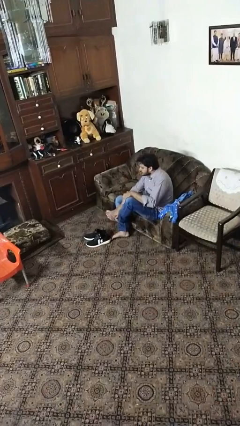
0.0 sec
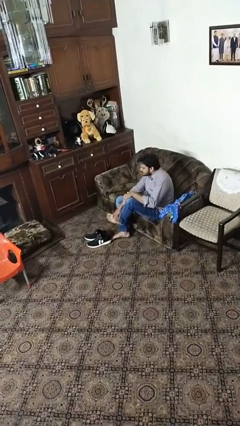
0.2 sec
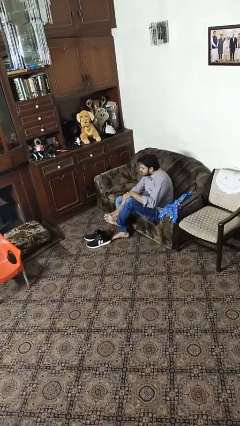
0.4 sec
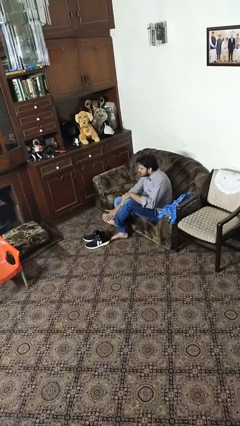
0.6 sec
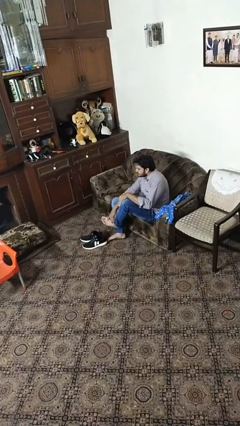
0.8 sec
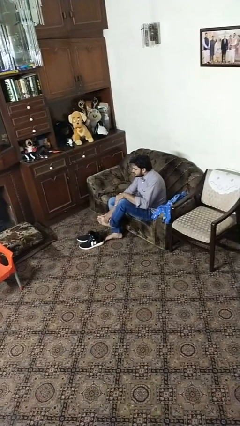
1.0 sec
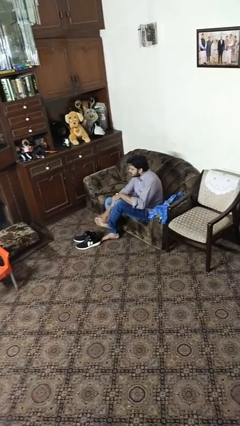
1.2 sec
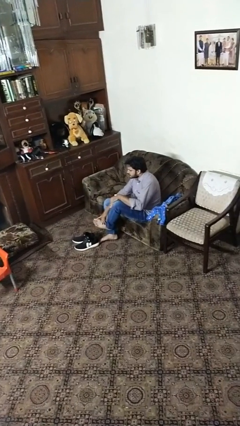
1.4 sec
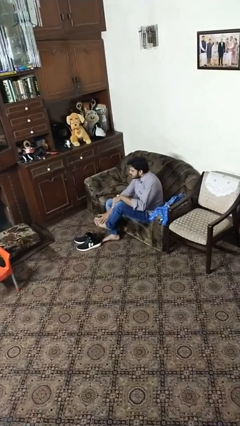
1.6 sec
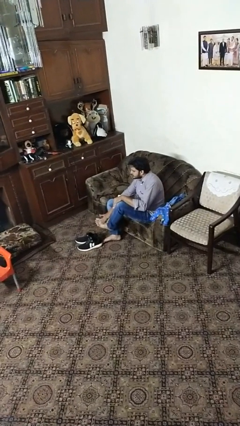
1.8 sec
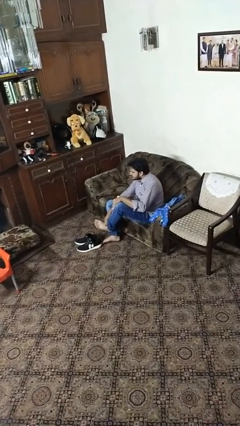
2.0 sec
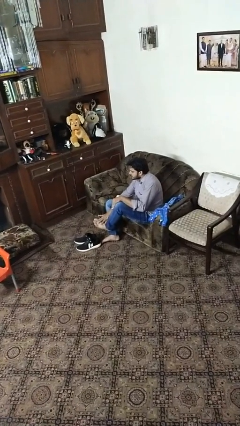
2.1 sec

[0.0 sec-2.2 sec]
person rubs foot

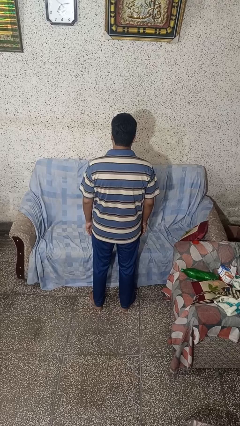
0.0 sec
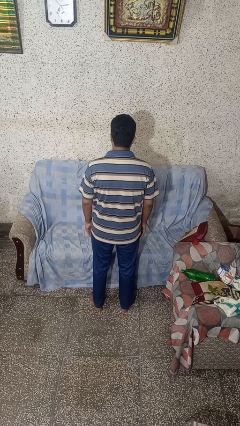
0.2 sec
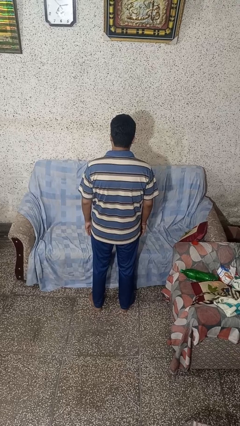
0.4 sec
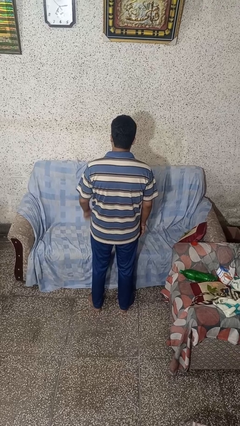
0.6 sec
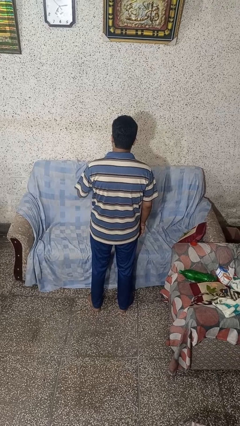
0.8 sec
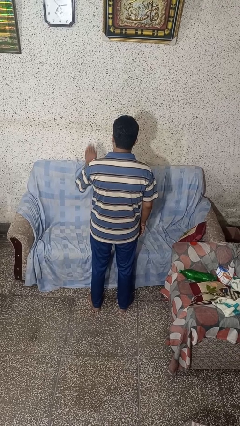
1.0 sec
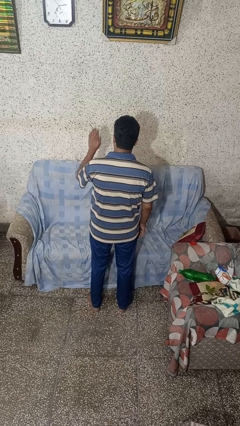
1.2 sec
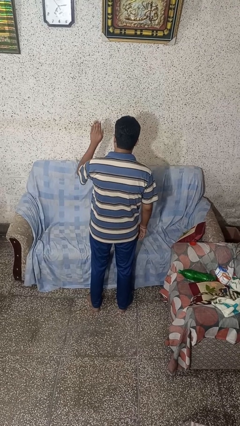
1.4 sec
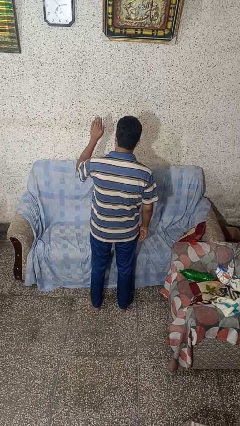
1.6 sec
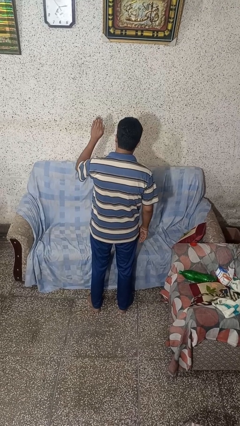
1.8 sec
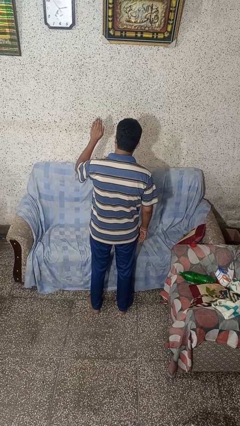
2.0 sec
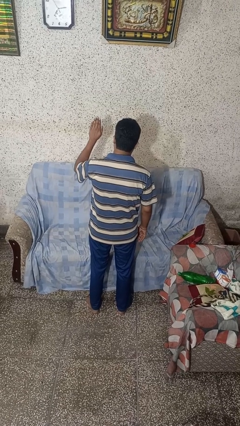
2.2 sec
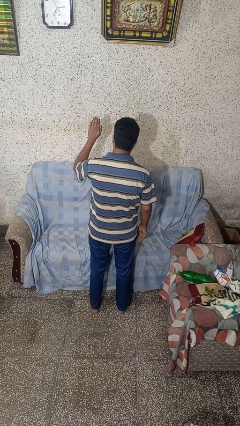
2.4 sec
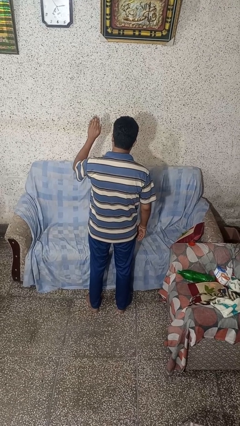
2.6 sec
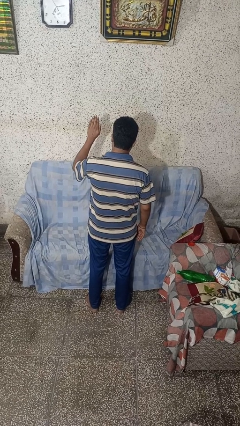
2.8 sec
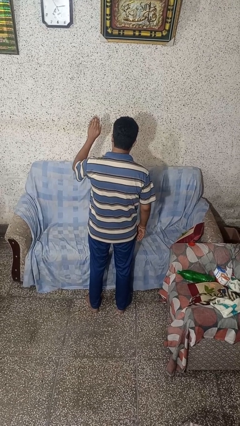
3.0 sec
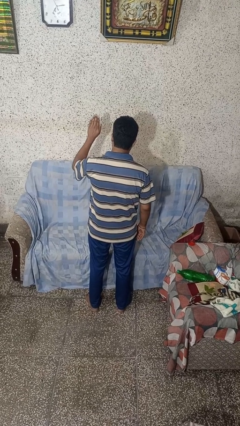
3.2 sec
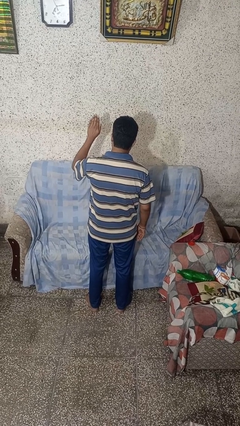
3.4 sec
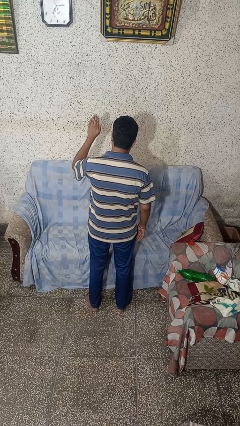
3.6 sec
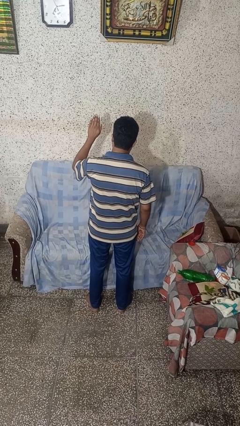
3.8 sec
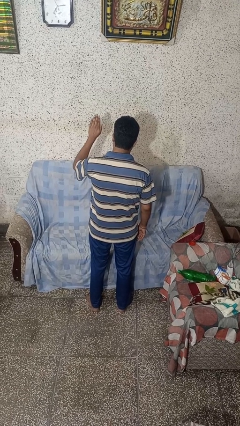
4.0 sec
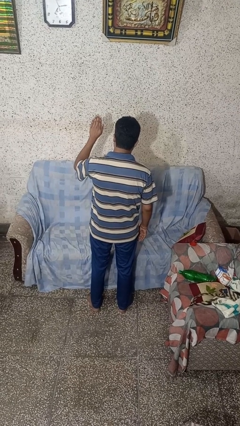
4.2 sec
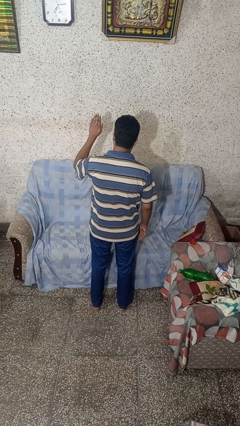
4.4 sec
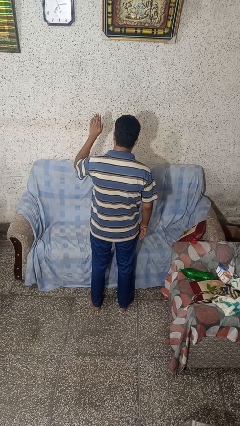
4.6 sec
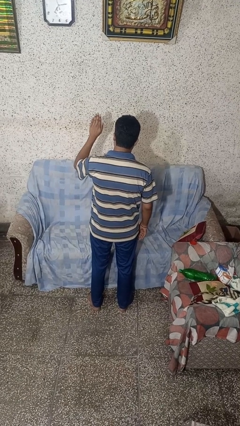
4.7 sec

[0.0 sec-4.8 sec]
person gestures stop

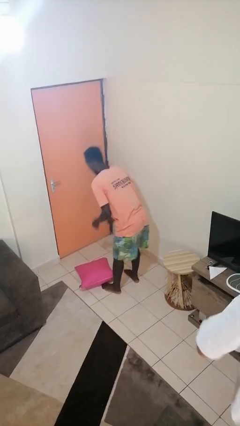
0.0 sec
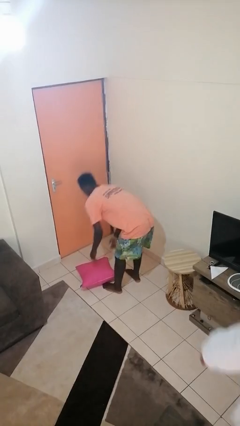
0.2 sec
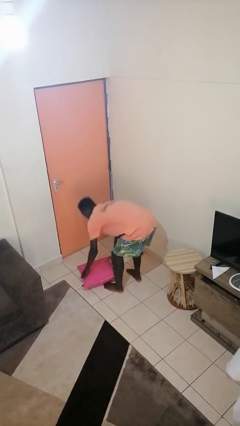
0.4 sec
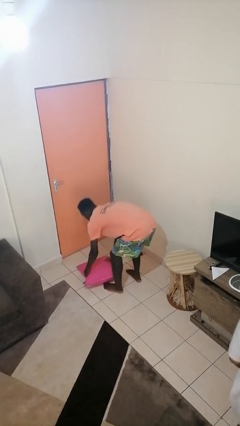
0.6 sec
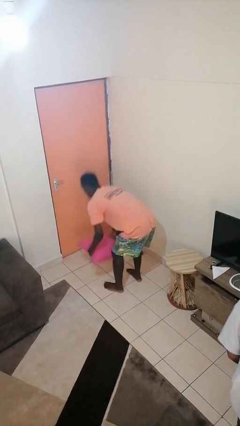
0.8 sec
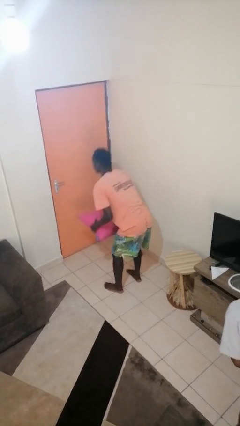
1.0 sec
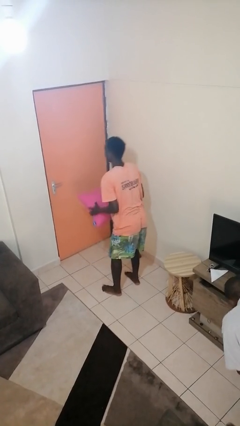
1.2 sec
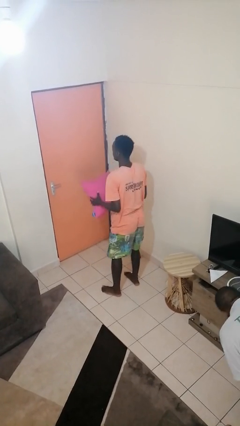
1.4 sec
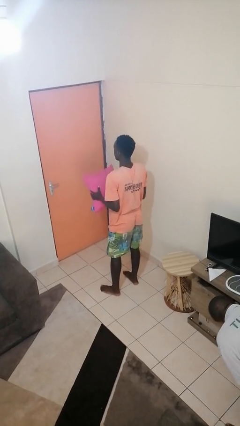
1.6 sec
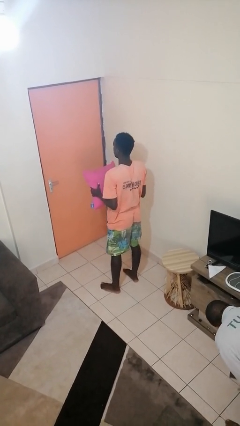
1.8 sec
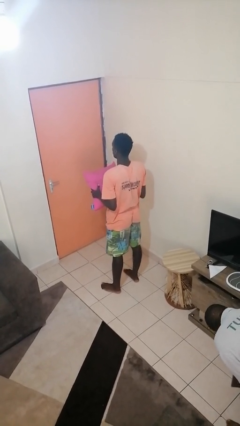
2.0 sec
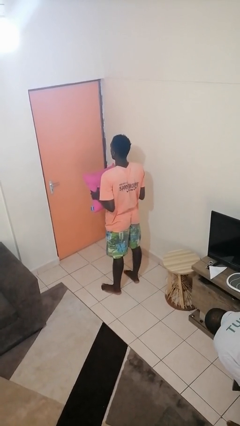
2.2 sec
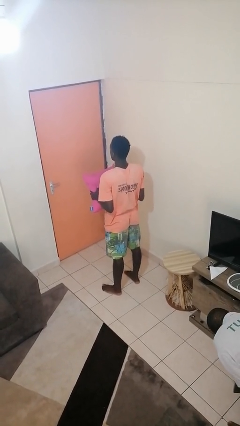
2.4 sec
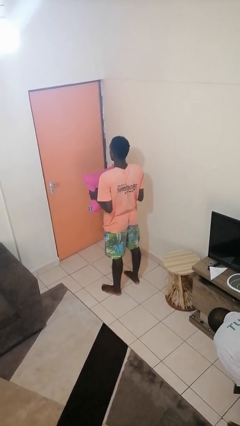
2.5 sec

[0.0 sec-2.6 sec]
person picks up object from floor

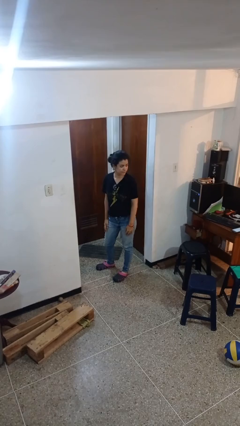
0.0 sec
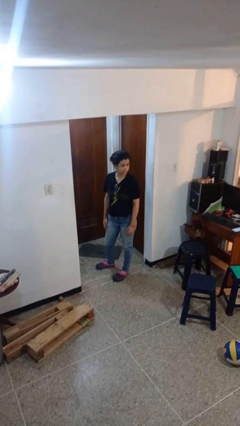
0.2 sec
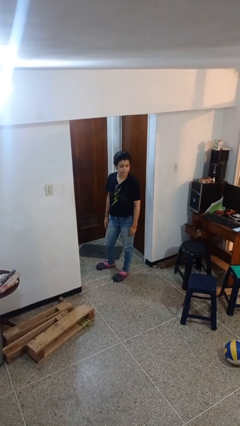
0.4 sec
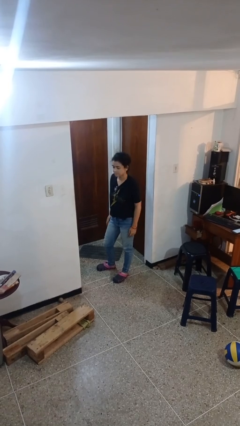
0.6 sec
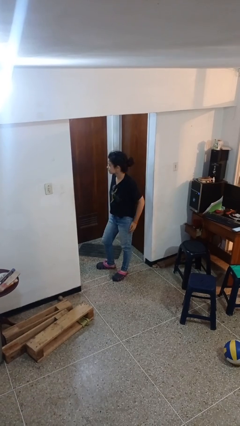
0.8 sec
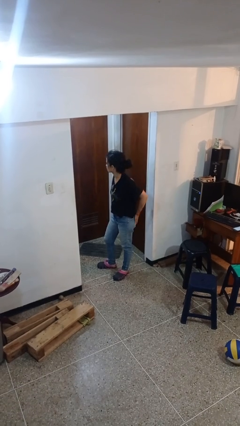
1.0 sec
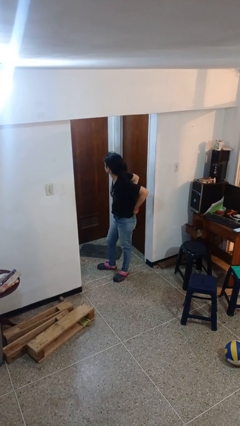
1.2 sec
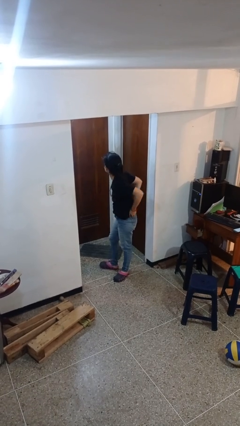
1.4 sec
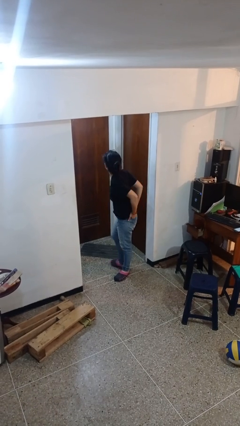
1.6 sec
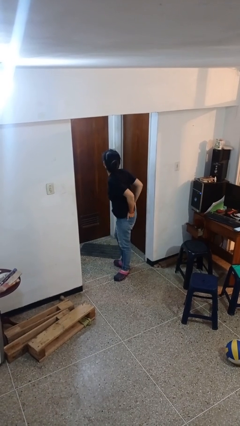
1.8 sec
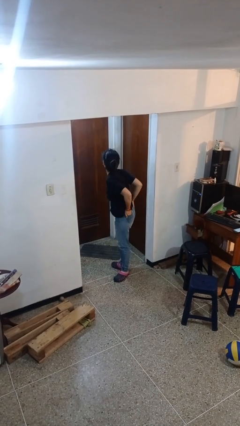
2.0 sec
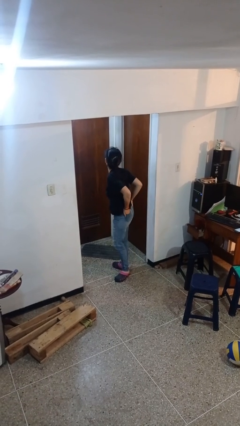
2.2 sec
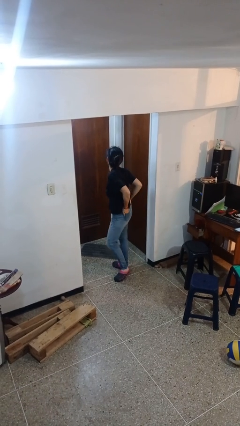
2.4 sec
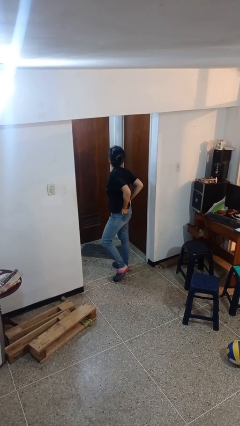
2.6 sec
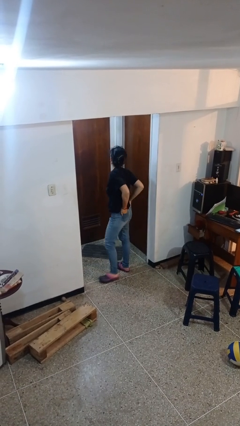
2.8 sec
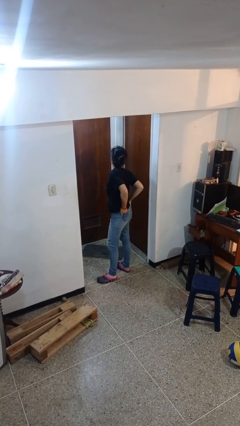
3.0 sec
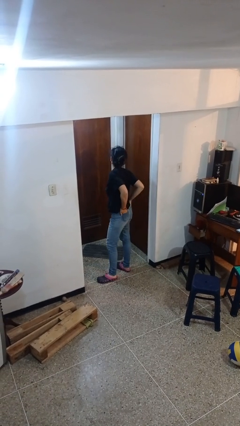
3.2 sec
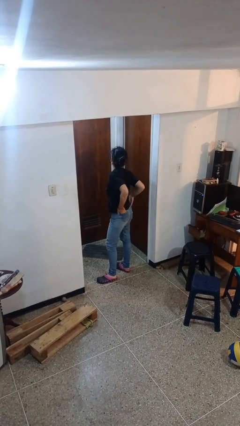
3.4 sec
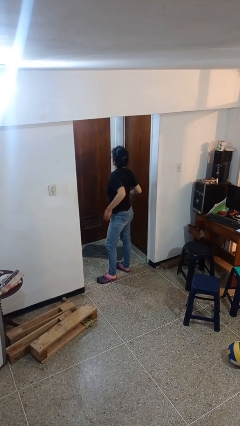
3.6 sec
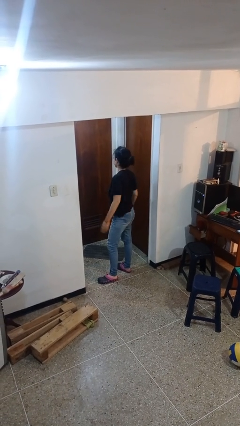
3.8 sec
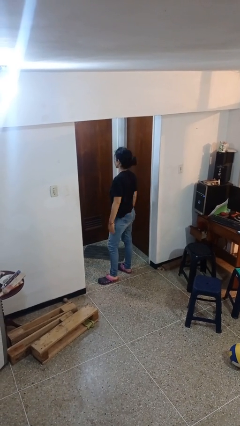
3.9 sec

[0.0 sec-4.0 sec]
person puts hands in back pockets

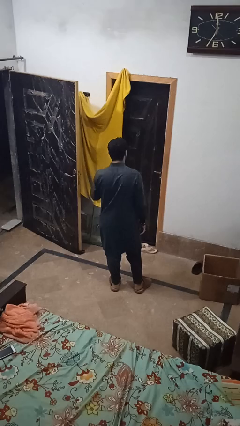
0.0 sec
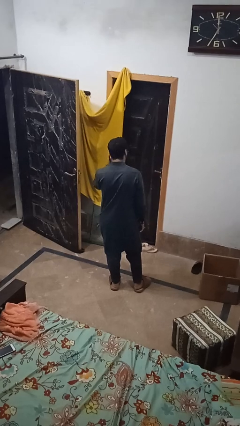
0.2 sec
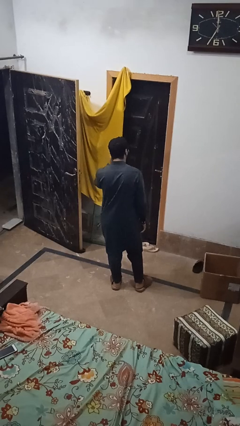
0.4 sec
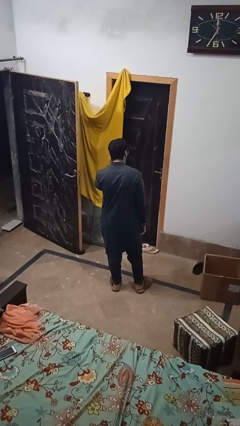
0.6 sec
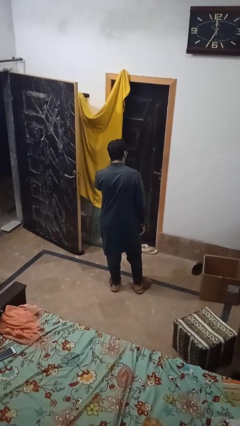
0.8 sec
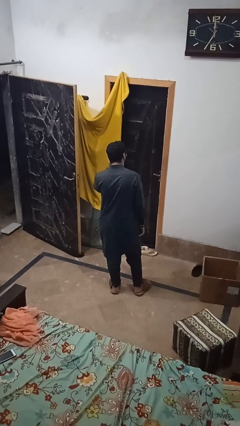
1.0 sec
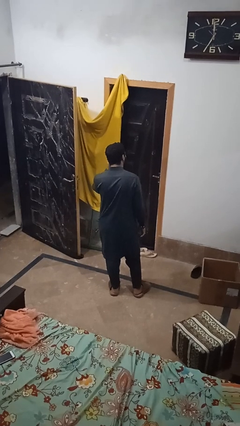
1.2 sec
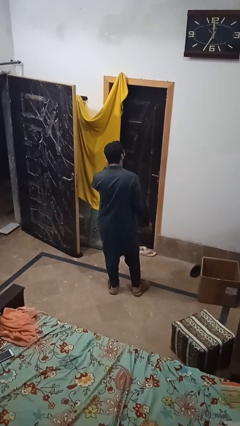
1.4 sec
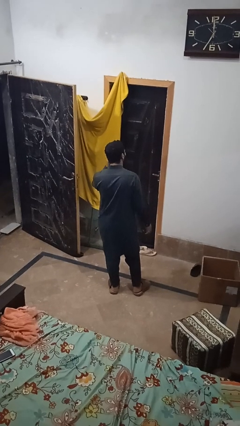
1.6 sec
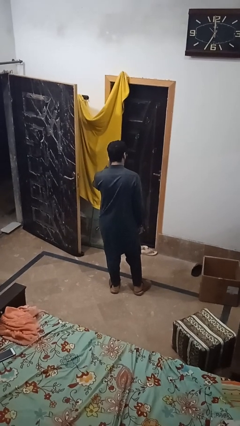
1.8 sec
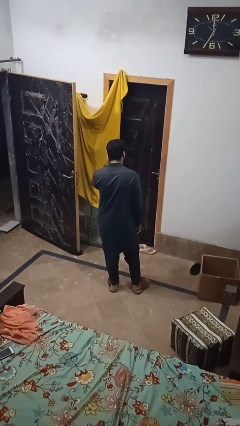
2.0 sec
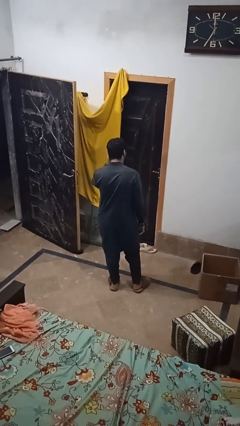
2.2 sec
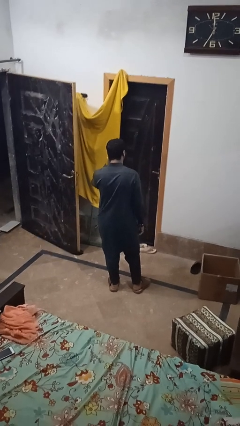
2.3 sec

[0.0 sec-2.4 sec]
person gestures listen closely

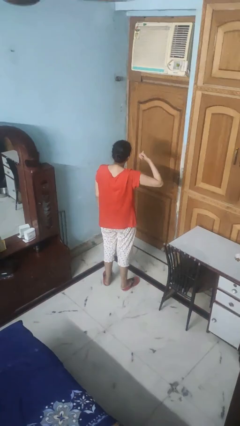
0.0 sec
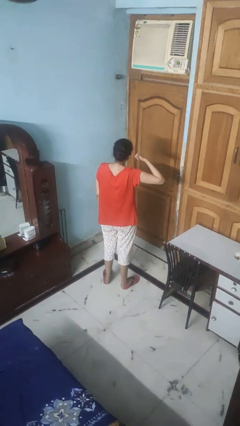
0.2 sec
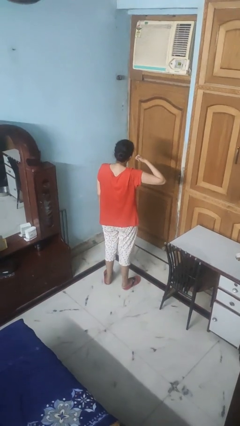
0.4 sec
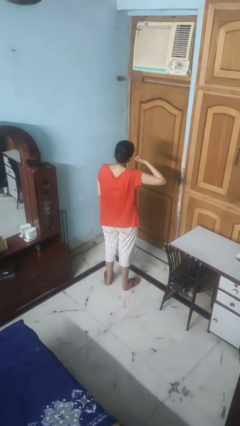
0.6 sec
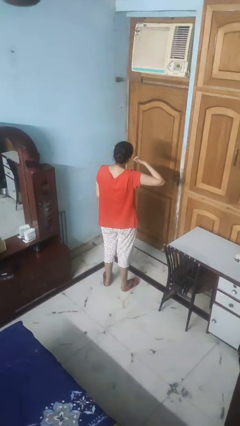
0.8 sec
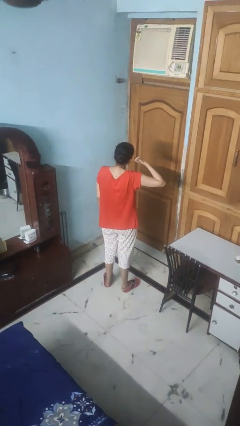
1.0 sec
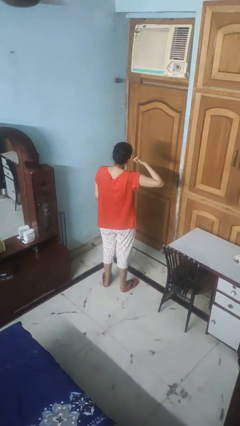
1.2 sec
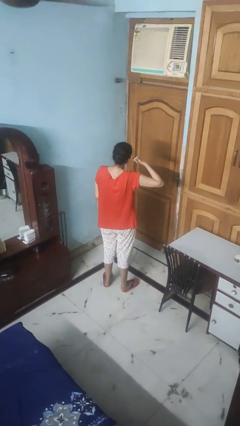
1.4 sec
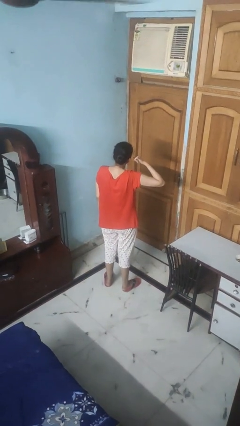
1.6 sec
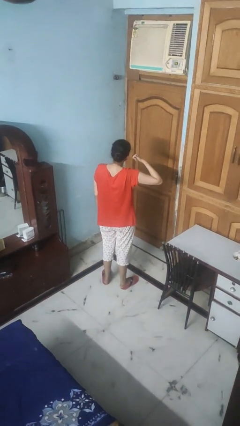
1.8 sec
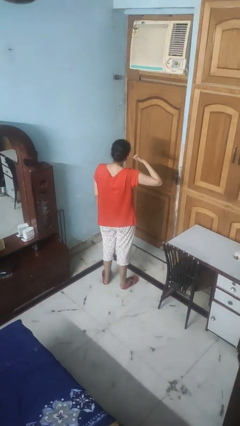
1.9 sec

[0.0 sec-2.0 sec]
person gestures call me
